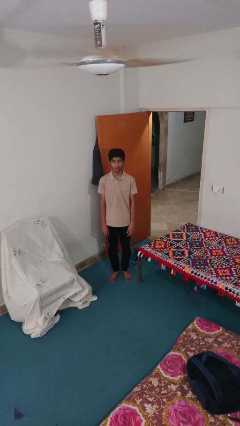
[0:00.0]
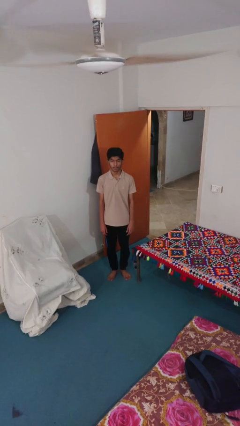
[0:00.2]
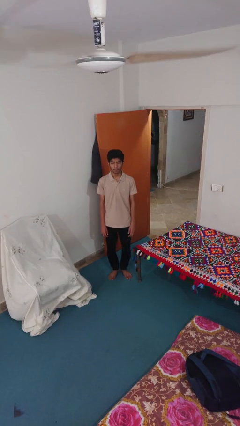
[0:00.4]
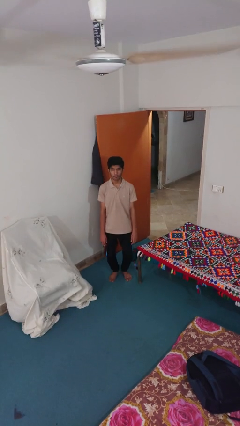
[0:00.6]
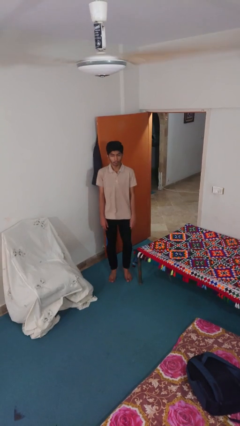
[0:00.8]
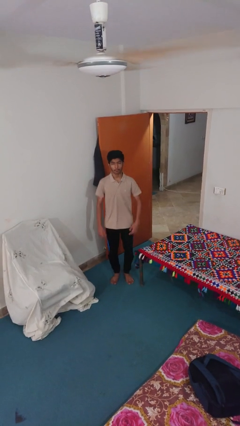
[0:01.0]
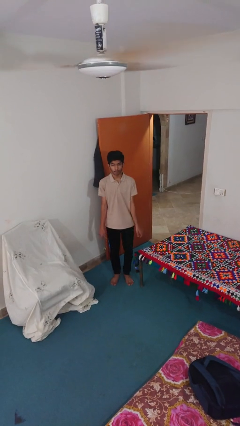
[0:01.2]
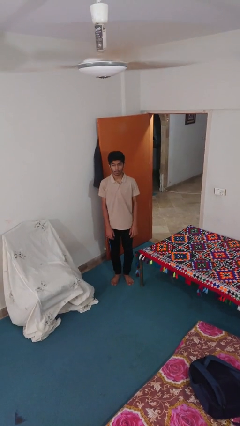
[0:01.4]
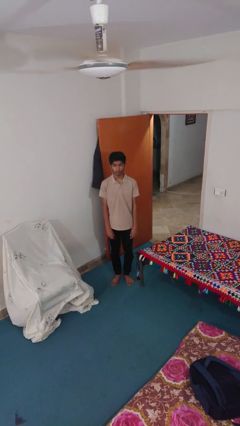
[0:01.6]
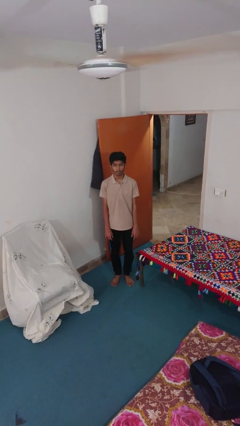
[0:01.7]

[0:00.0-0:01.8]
person jumps

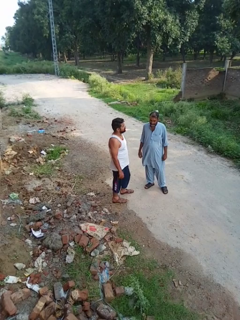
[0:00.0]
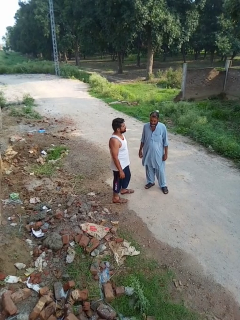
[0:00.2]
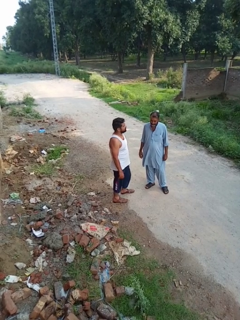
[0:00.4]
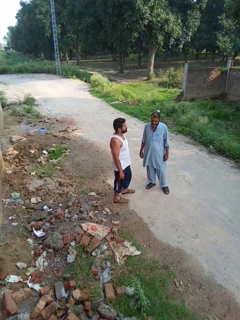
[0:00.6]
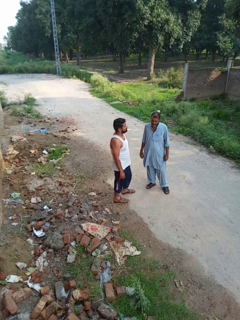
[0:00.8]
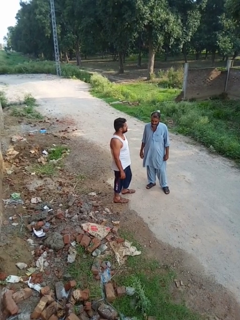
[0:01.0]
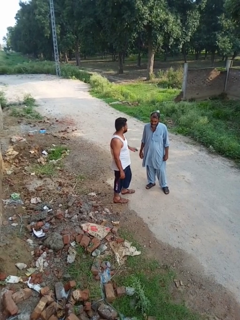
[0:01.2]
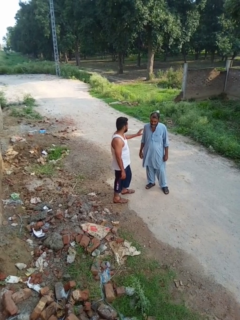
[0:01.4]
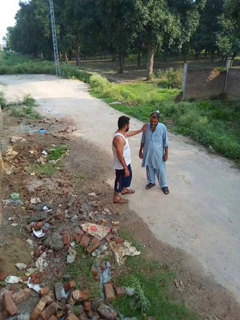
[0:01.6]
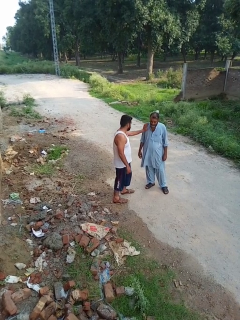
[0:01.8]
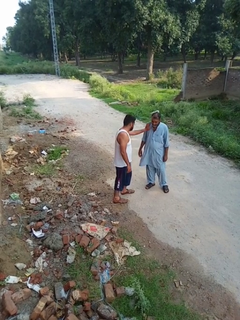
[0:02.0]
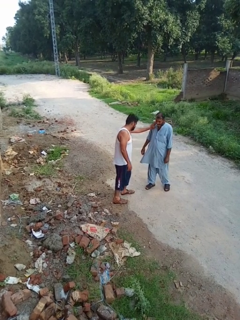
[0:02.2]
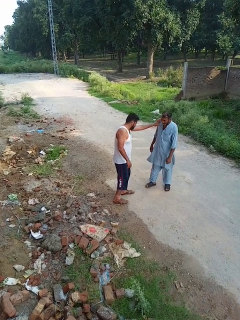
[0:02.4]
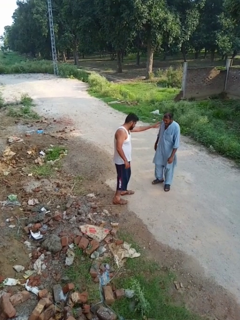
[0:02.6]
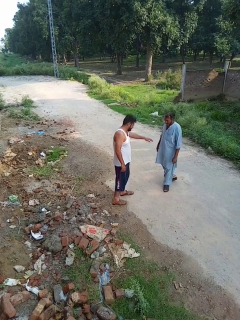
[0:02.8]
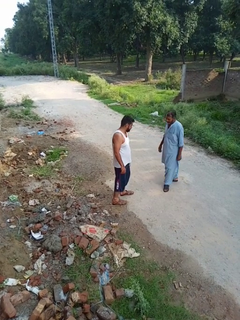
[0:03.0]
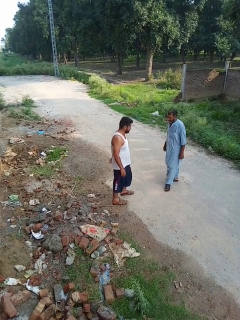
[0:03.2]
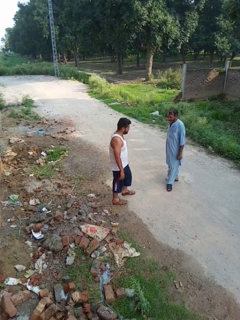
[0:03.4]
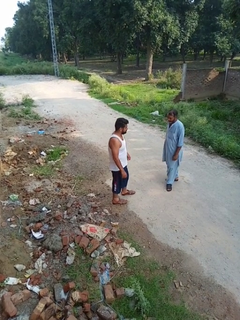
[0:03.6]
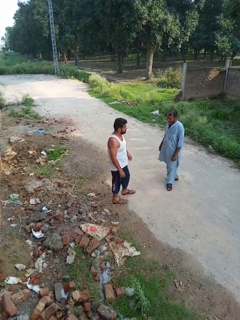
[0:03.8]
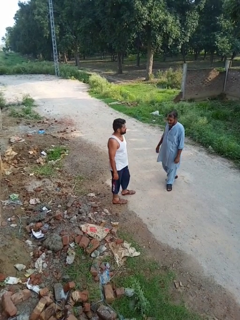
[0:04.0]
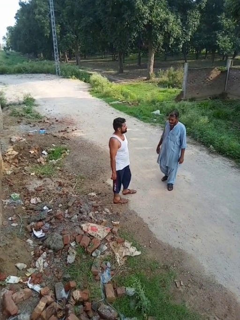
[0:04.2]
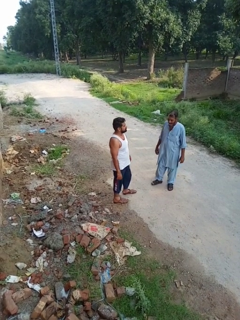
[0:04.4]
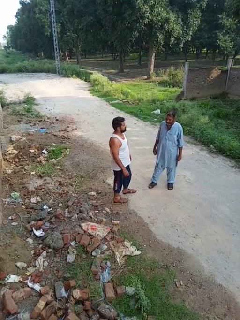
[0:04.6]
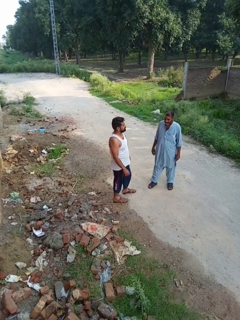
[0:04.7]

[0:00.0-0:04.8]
person shoves person

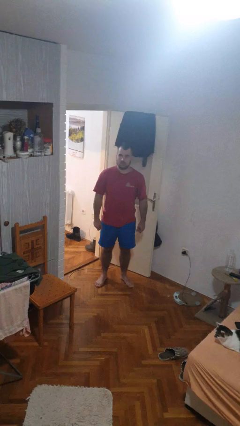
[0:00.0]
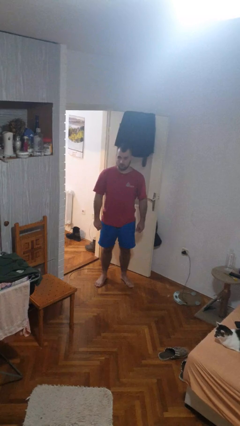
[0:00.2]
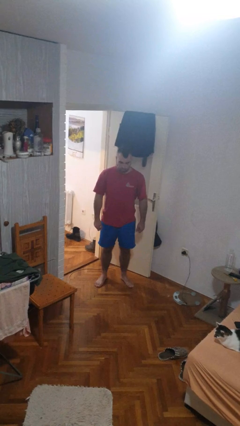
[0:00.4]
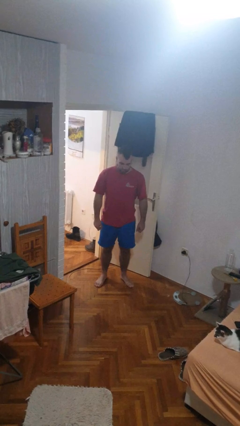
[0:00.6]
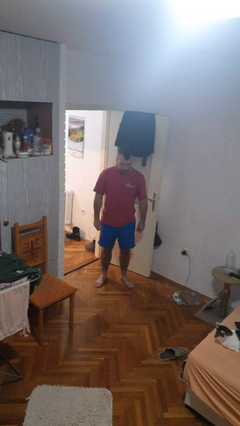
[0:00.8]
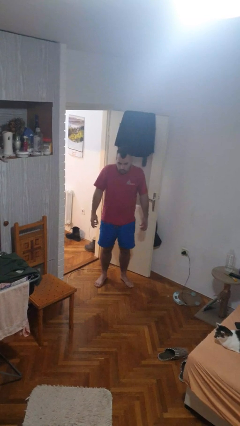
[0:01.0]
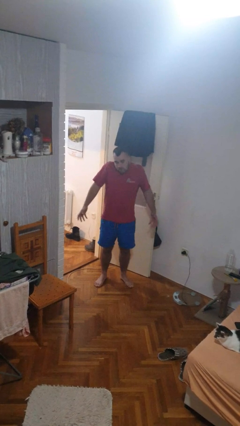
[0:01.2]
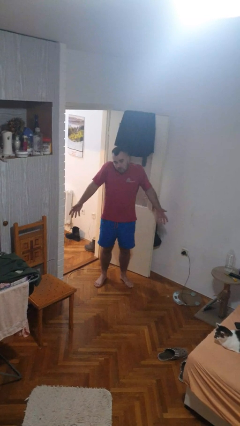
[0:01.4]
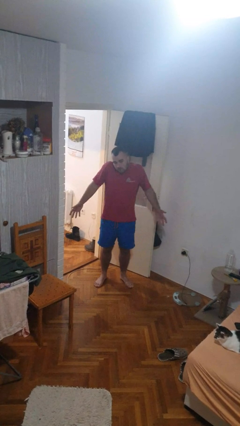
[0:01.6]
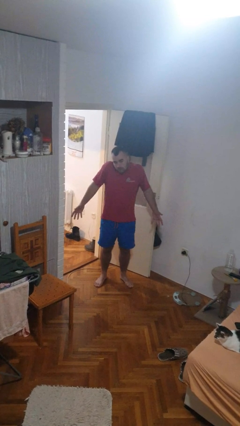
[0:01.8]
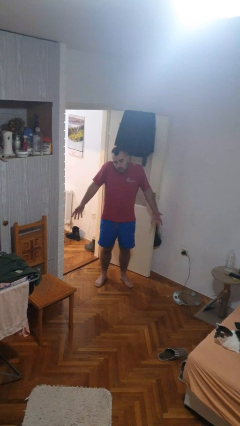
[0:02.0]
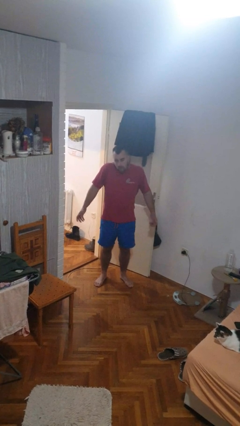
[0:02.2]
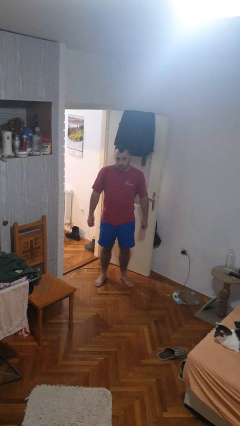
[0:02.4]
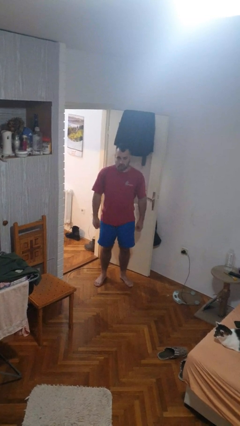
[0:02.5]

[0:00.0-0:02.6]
person shrugs

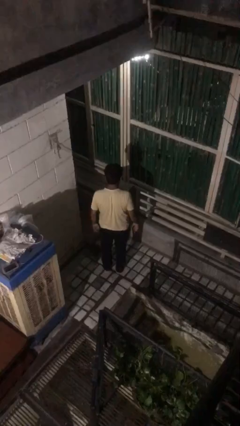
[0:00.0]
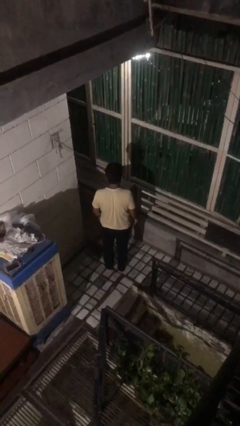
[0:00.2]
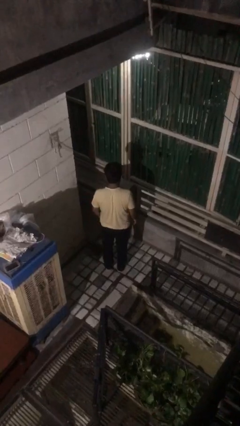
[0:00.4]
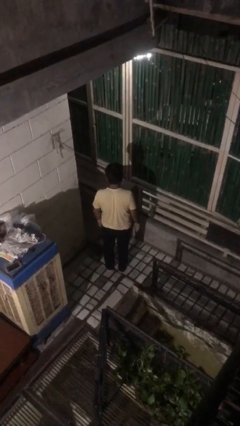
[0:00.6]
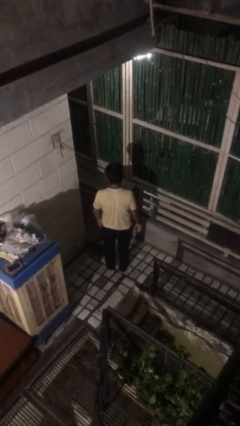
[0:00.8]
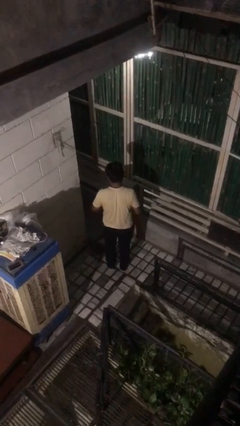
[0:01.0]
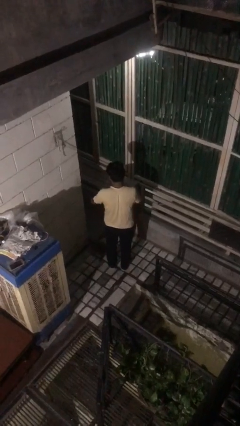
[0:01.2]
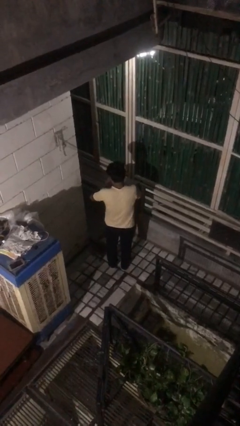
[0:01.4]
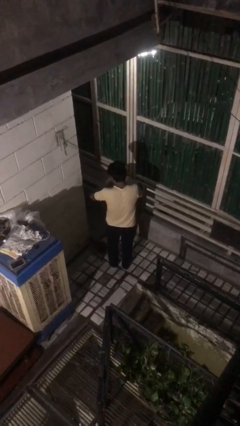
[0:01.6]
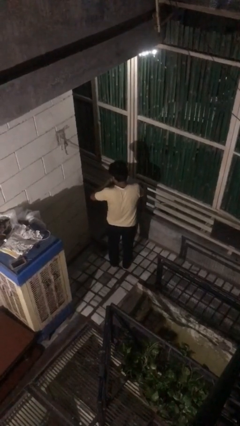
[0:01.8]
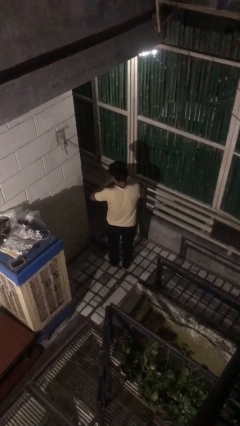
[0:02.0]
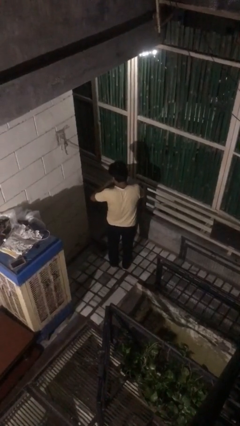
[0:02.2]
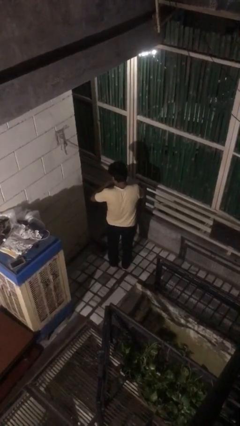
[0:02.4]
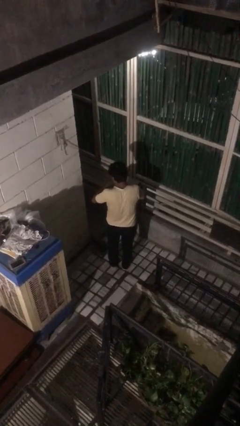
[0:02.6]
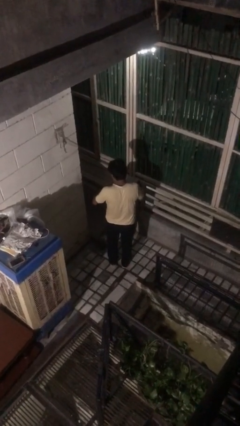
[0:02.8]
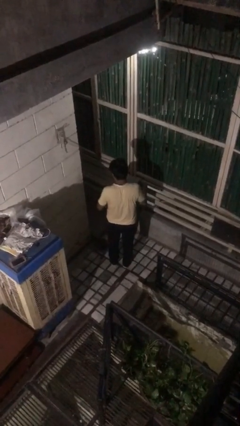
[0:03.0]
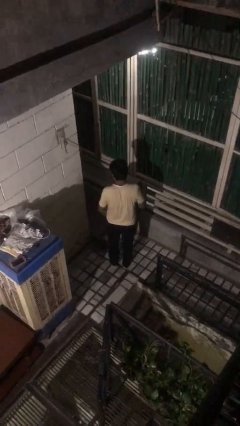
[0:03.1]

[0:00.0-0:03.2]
person swats bug

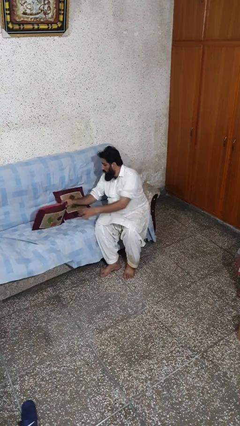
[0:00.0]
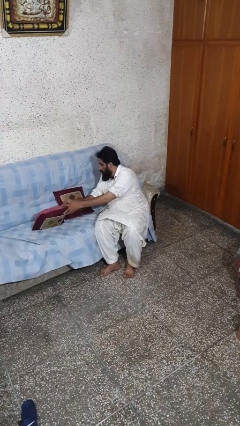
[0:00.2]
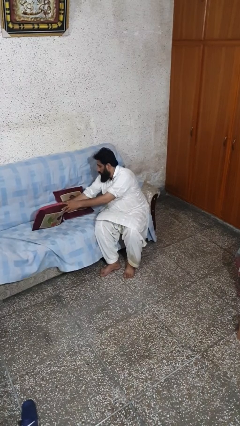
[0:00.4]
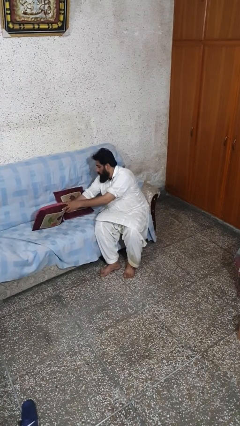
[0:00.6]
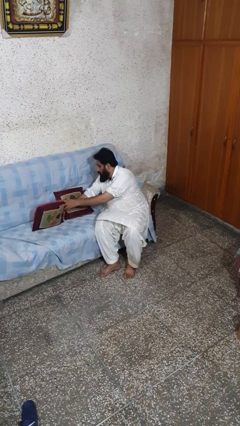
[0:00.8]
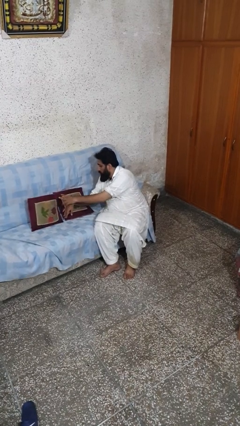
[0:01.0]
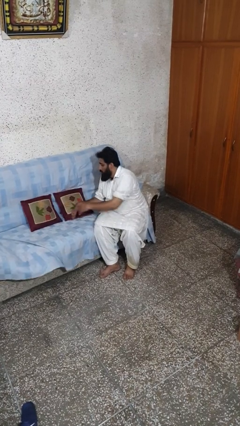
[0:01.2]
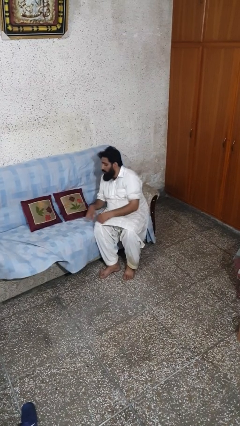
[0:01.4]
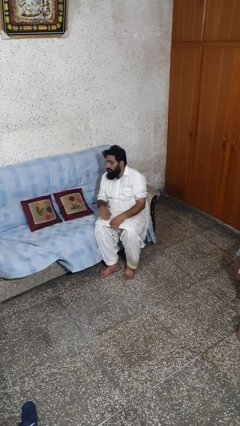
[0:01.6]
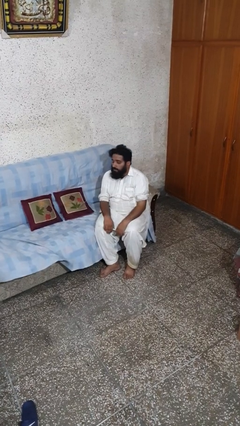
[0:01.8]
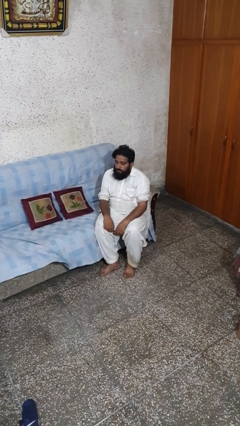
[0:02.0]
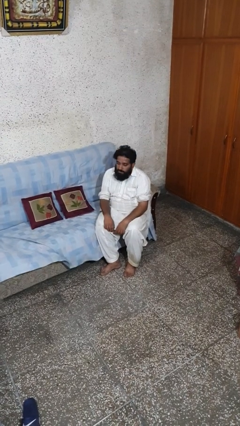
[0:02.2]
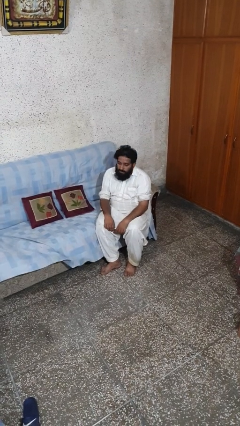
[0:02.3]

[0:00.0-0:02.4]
person searches in couch

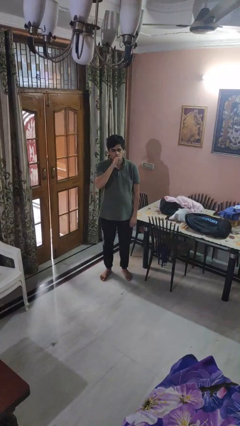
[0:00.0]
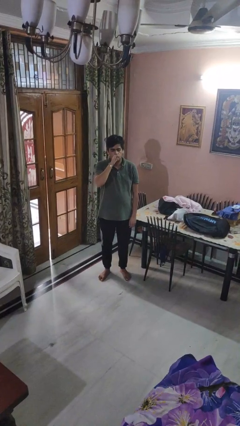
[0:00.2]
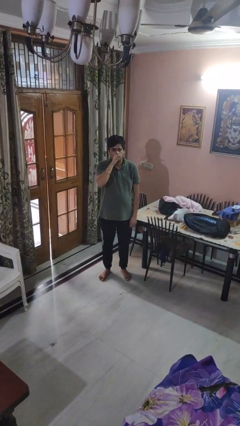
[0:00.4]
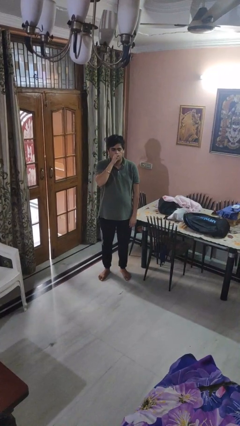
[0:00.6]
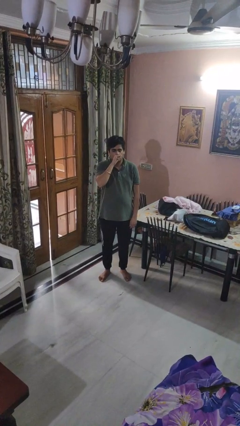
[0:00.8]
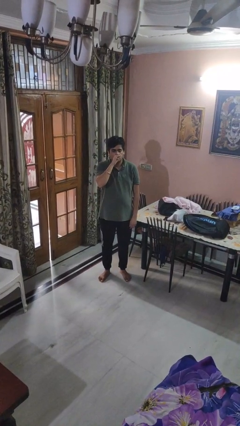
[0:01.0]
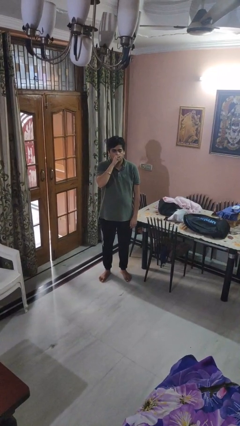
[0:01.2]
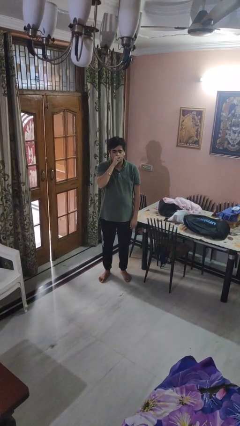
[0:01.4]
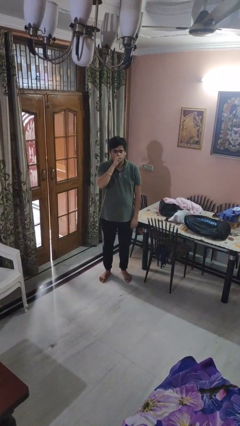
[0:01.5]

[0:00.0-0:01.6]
person vapes

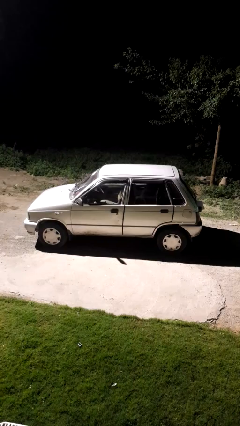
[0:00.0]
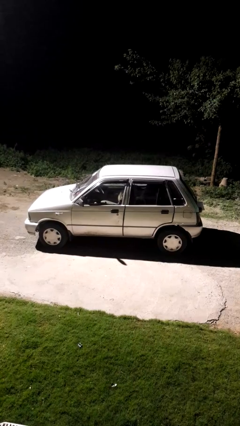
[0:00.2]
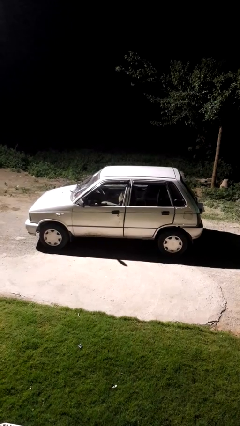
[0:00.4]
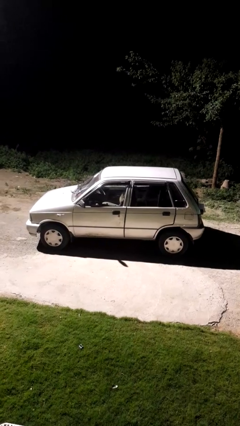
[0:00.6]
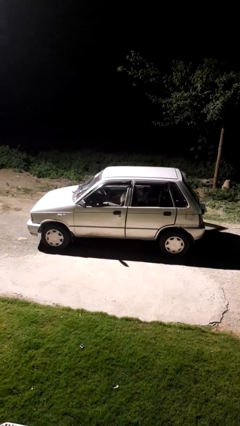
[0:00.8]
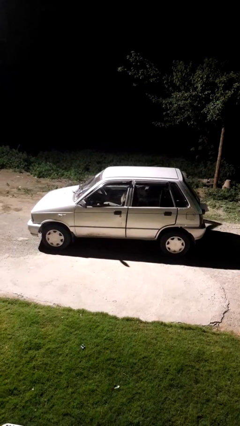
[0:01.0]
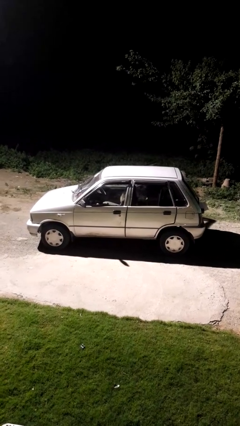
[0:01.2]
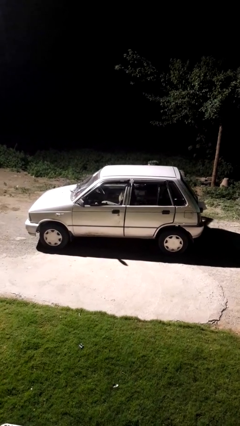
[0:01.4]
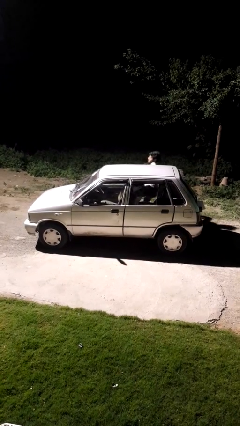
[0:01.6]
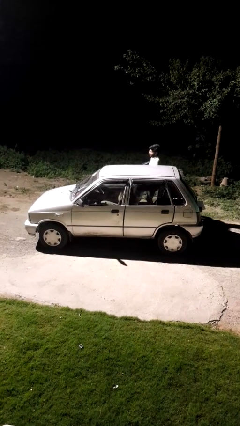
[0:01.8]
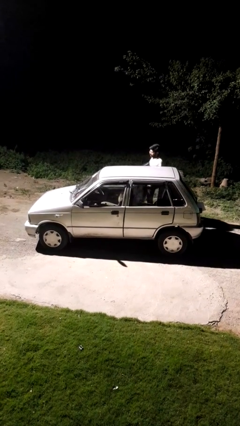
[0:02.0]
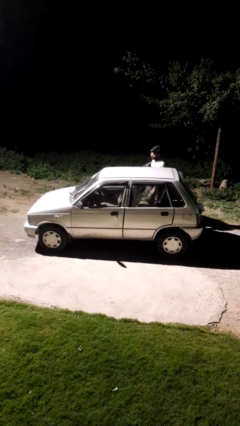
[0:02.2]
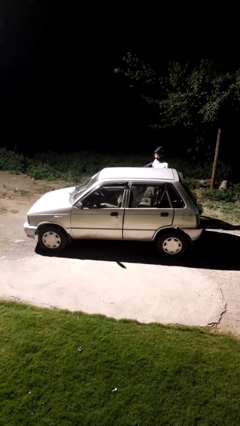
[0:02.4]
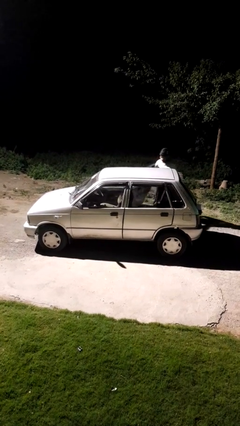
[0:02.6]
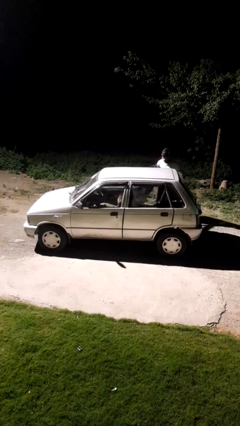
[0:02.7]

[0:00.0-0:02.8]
car drops off person
